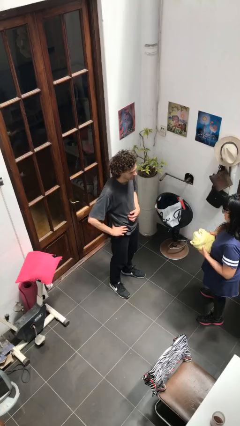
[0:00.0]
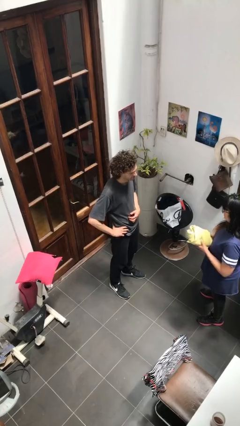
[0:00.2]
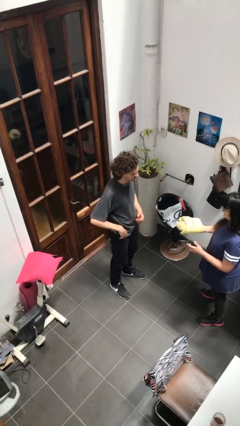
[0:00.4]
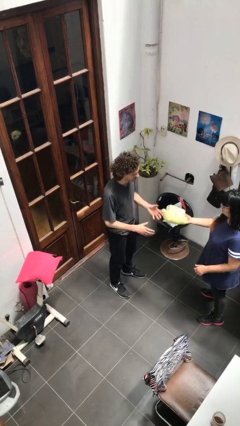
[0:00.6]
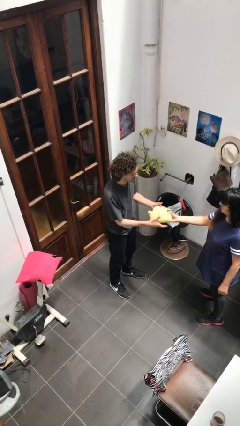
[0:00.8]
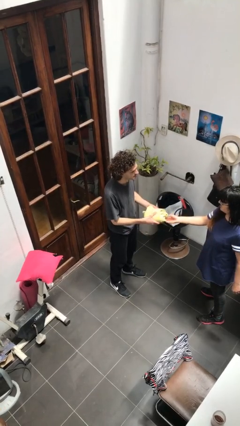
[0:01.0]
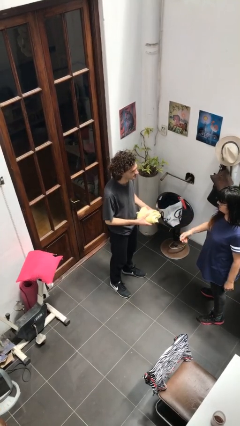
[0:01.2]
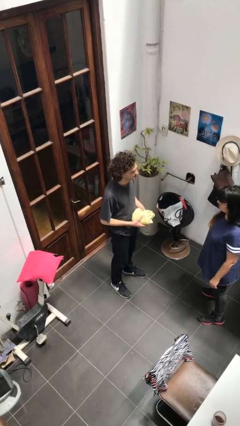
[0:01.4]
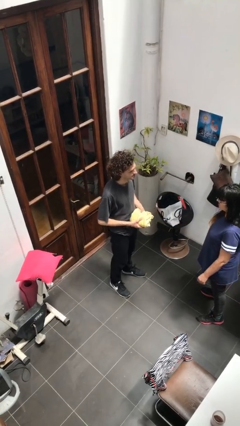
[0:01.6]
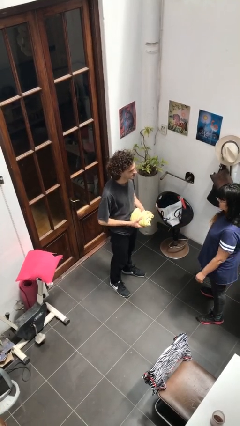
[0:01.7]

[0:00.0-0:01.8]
person transfers object to person

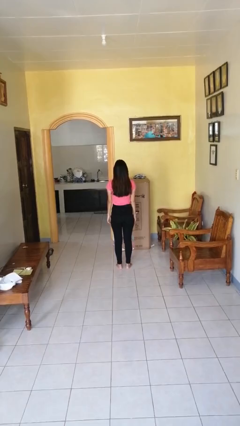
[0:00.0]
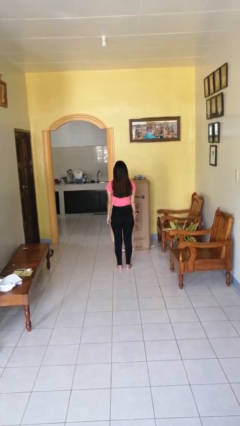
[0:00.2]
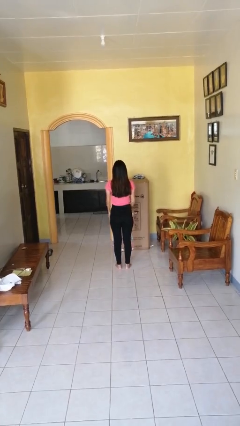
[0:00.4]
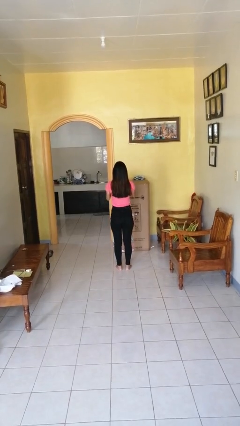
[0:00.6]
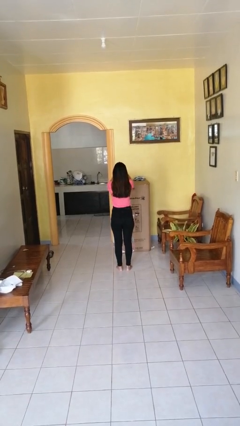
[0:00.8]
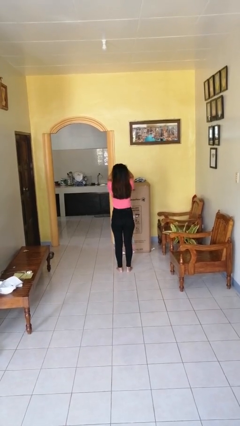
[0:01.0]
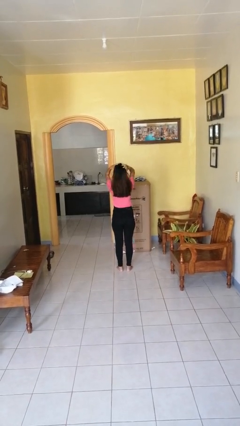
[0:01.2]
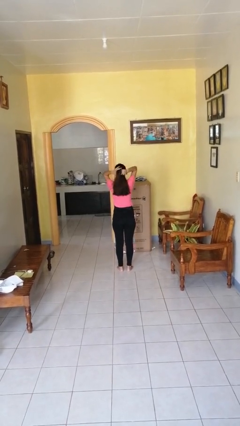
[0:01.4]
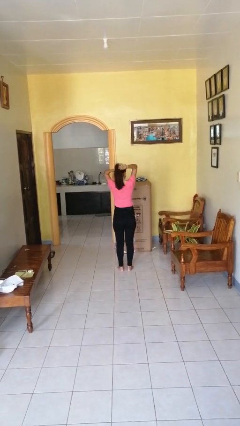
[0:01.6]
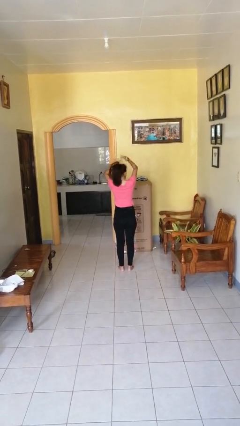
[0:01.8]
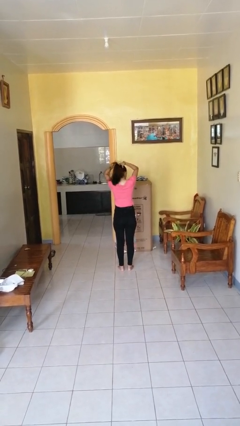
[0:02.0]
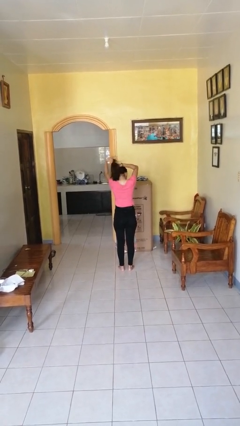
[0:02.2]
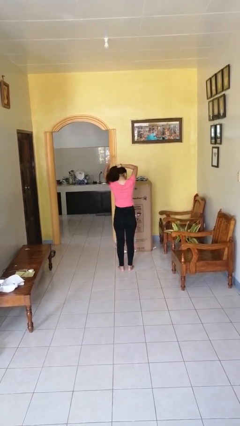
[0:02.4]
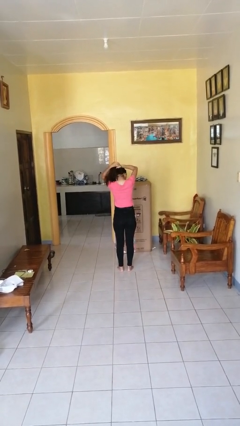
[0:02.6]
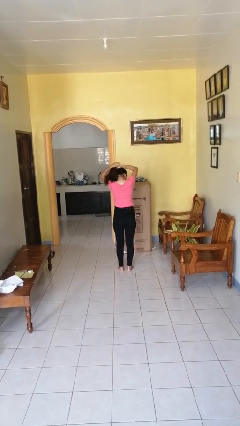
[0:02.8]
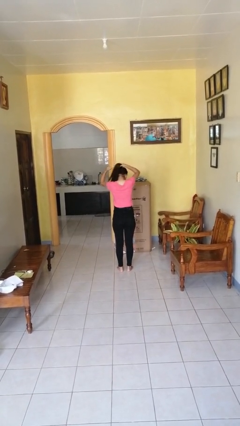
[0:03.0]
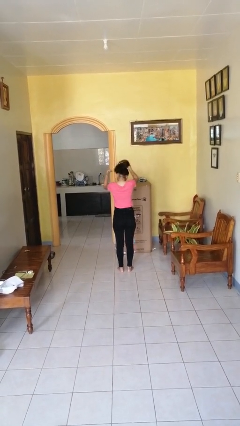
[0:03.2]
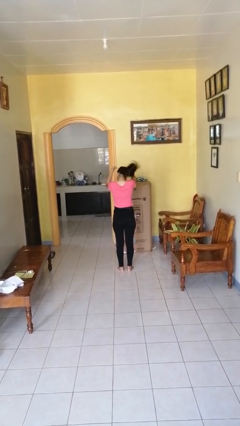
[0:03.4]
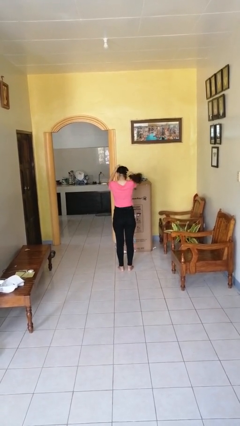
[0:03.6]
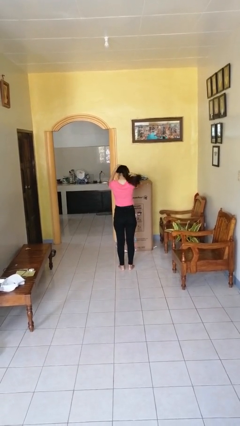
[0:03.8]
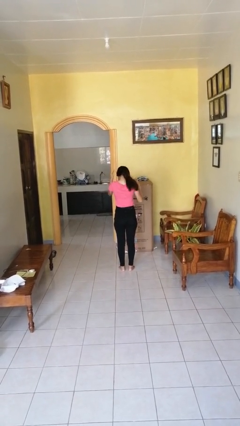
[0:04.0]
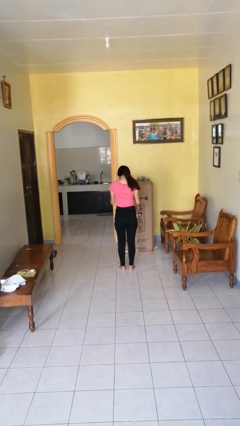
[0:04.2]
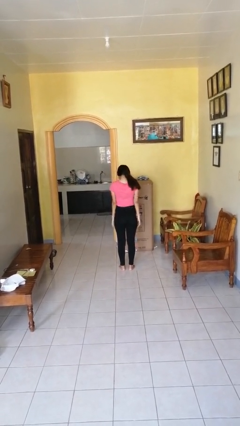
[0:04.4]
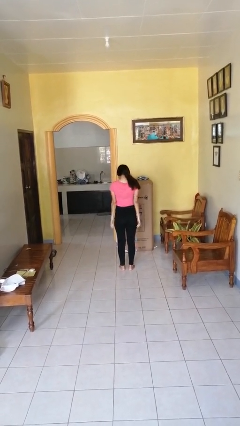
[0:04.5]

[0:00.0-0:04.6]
person puts hair in ponytail

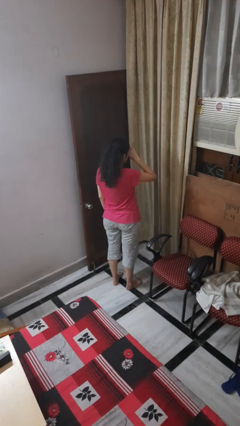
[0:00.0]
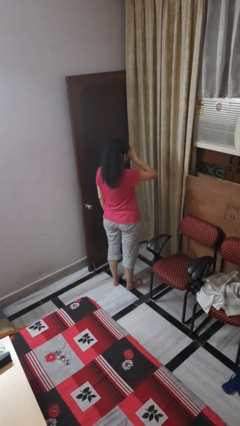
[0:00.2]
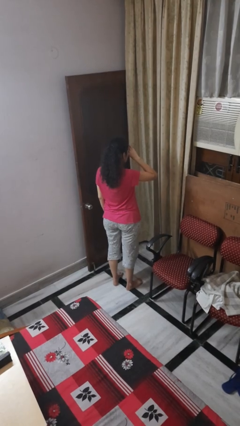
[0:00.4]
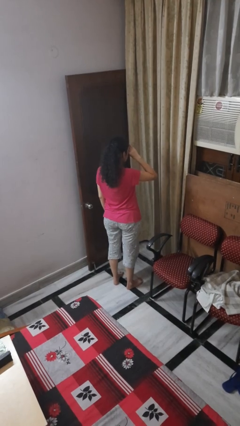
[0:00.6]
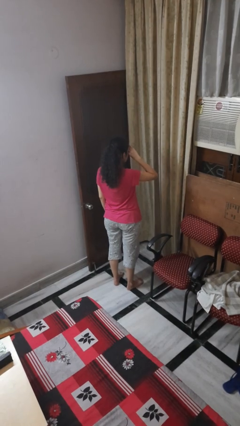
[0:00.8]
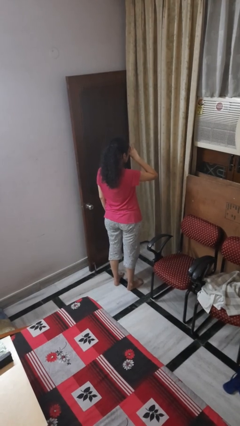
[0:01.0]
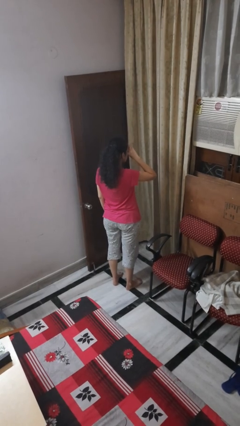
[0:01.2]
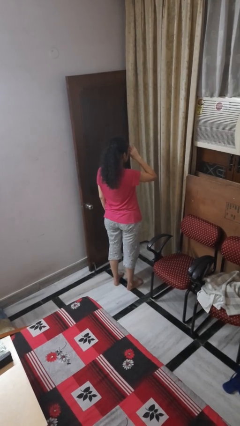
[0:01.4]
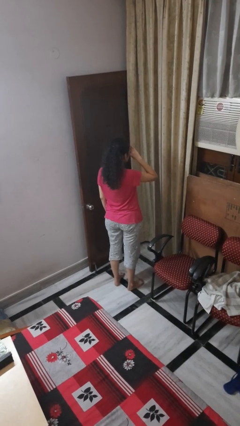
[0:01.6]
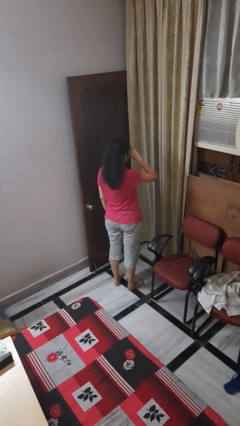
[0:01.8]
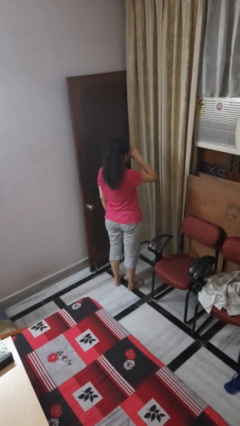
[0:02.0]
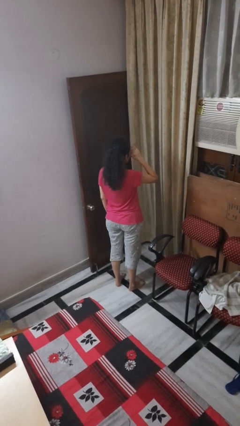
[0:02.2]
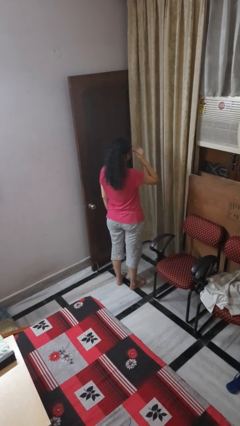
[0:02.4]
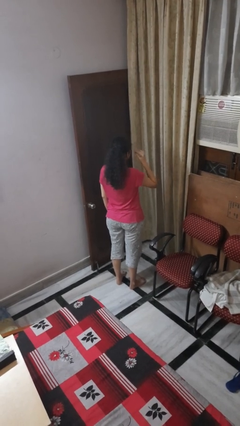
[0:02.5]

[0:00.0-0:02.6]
person rubs eyes

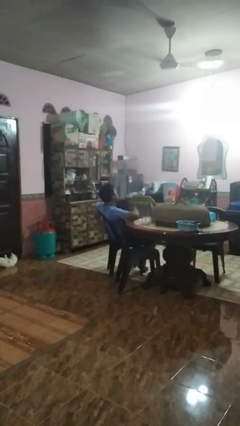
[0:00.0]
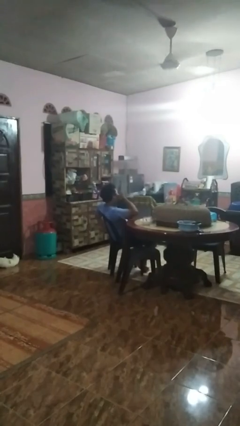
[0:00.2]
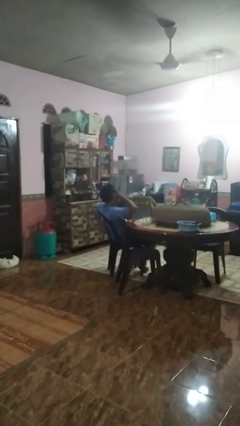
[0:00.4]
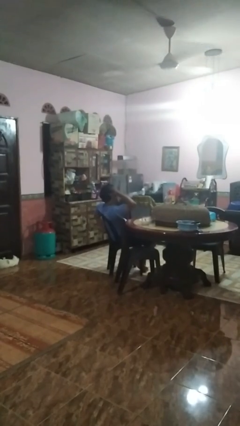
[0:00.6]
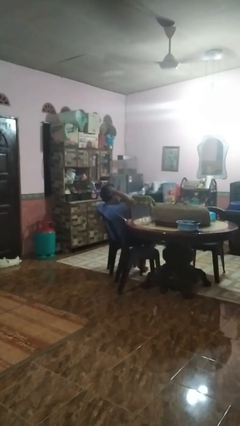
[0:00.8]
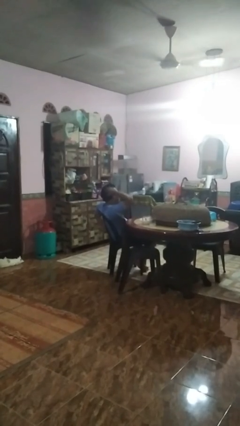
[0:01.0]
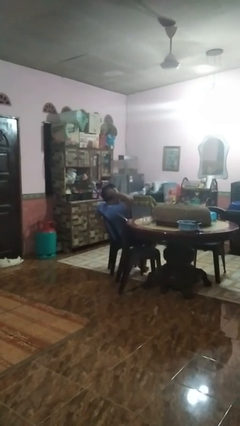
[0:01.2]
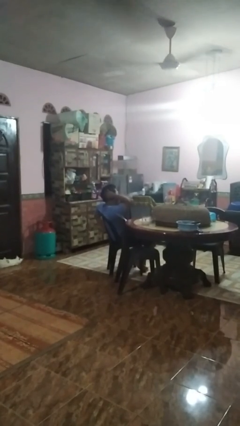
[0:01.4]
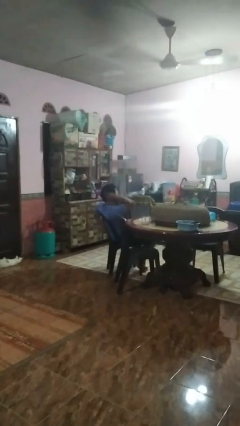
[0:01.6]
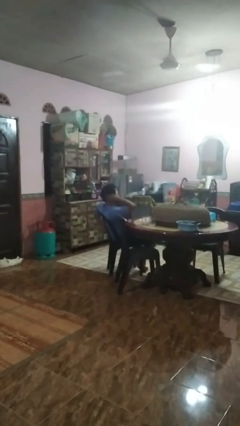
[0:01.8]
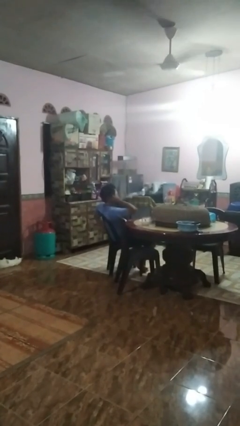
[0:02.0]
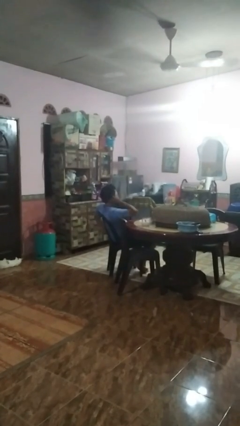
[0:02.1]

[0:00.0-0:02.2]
person strokes hair

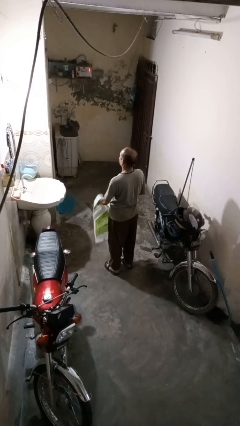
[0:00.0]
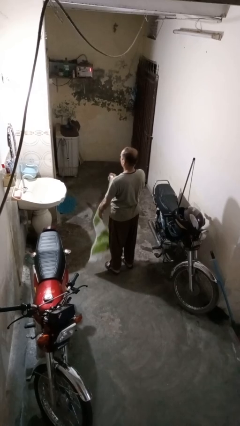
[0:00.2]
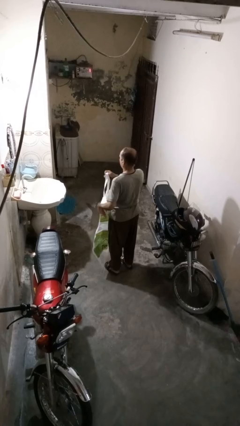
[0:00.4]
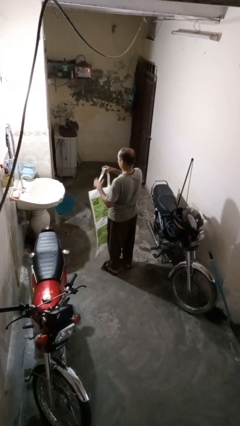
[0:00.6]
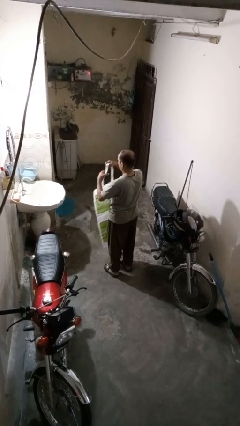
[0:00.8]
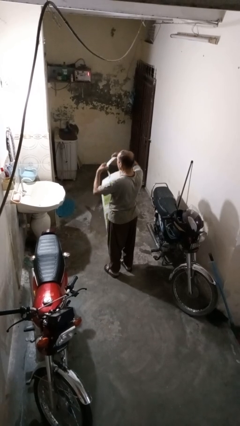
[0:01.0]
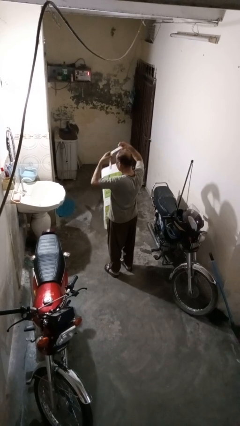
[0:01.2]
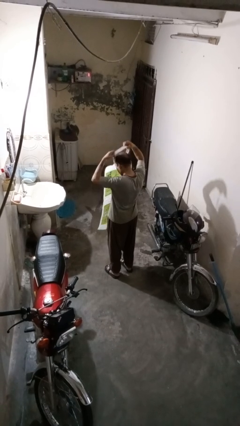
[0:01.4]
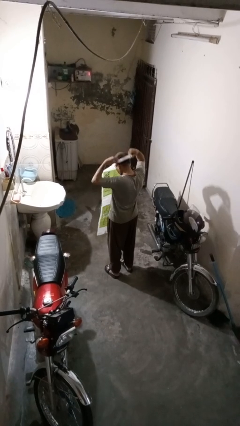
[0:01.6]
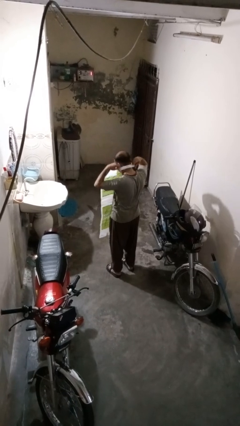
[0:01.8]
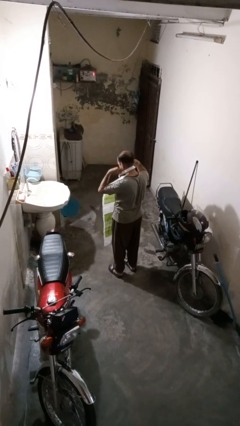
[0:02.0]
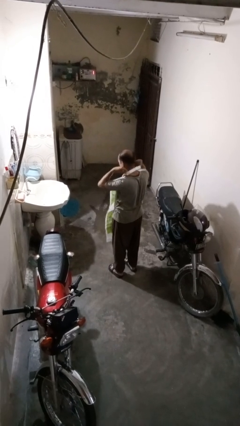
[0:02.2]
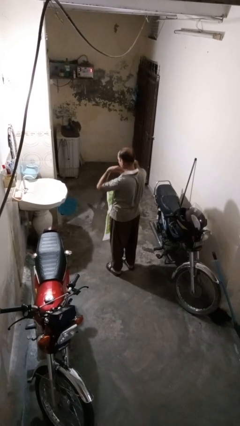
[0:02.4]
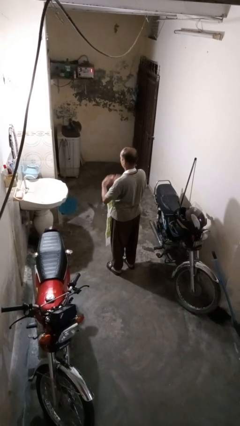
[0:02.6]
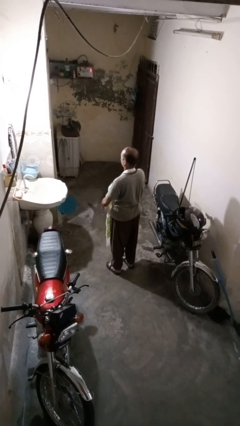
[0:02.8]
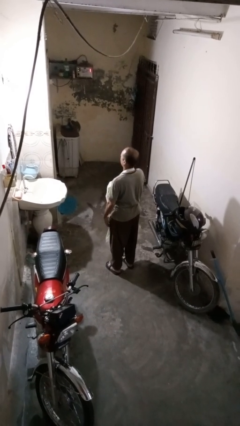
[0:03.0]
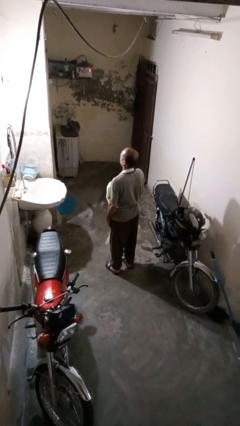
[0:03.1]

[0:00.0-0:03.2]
person puts on apron

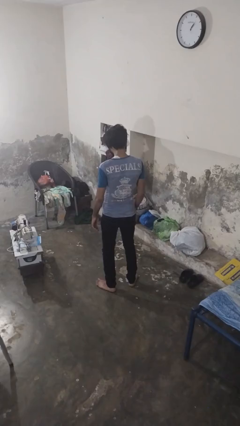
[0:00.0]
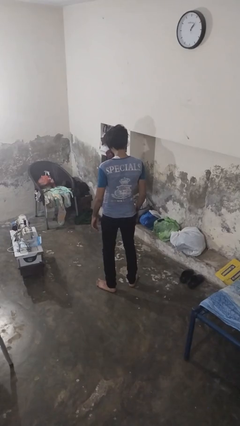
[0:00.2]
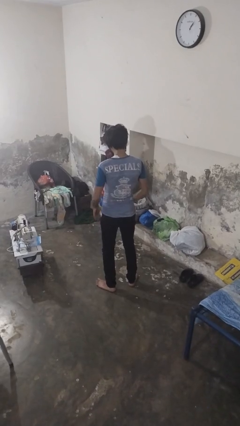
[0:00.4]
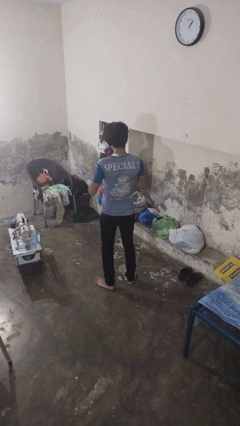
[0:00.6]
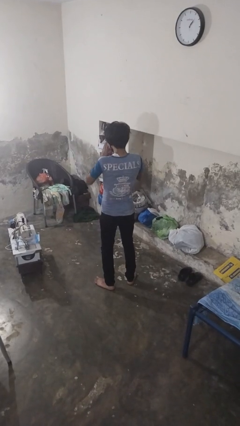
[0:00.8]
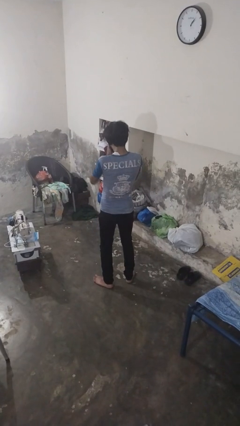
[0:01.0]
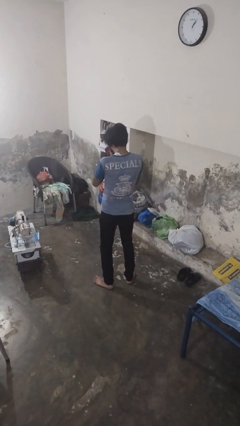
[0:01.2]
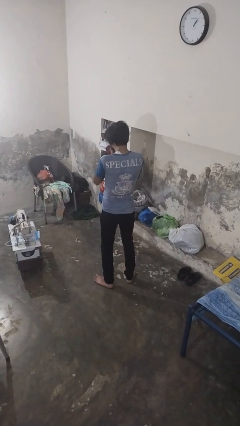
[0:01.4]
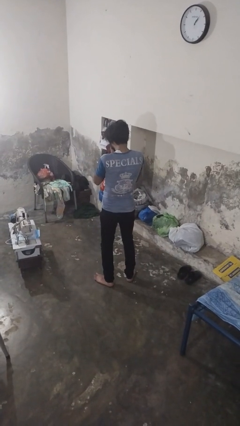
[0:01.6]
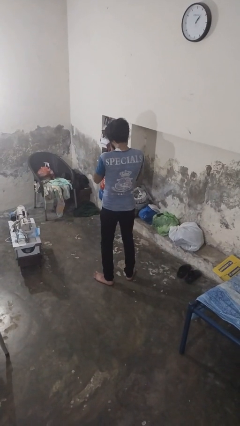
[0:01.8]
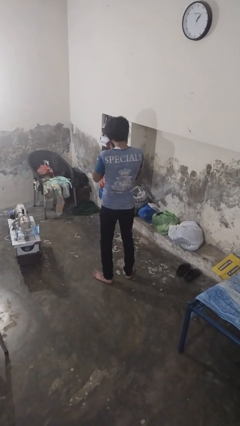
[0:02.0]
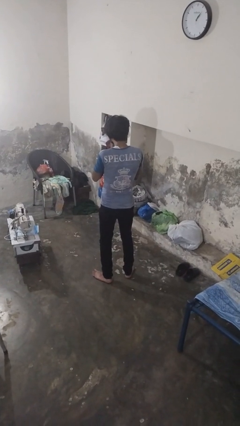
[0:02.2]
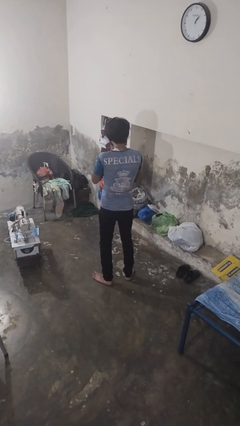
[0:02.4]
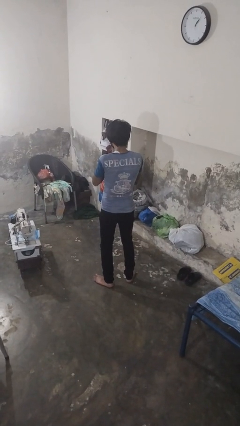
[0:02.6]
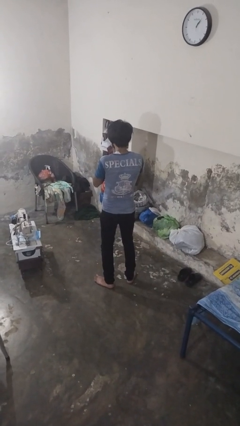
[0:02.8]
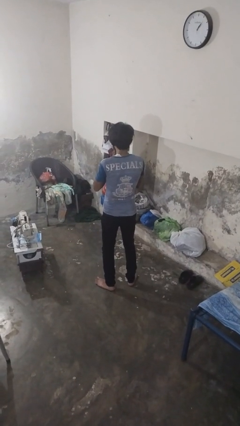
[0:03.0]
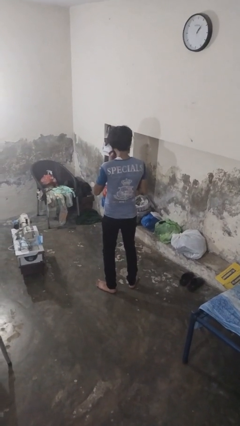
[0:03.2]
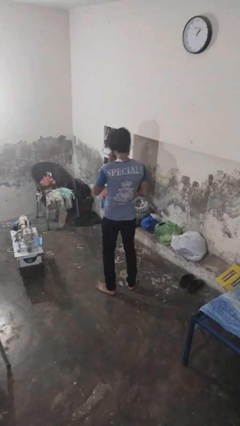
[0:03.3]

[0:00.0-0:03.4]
person sneezes into hand
